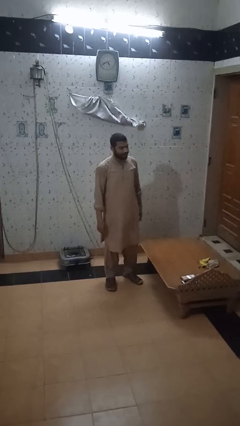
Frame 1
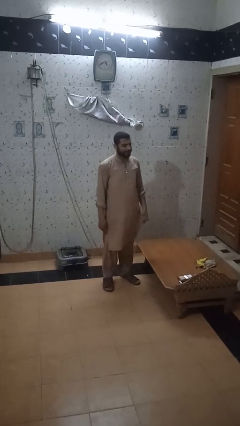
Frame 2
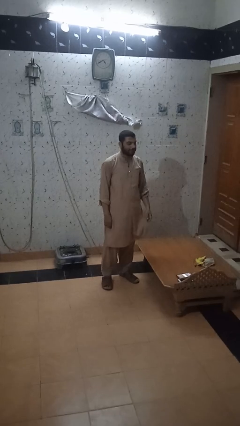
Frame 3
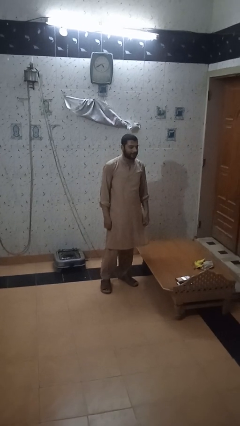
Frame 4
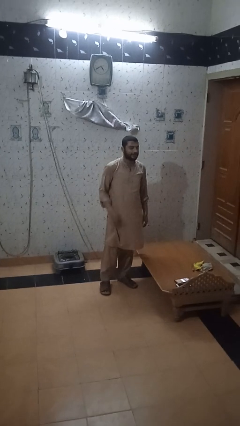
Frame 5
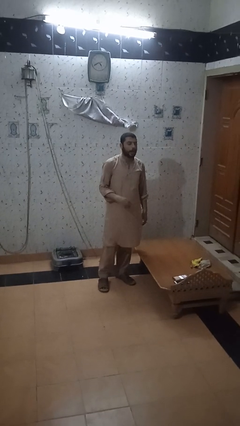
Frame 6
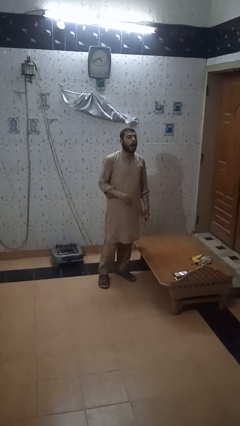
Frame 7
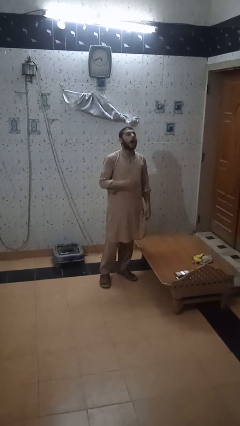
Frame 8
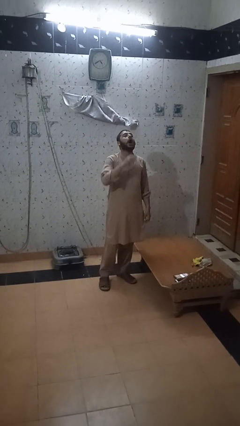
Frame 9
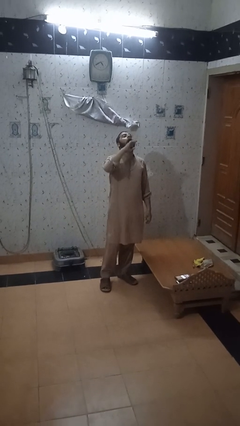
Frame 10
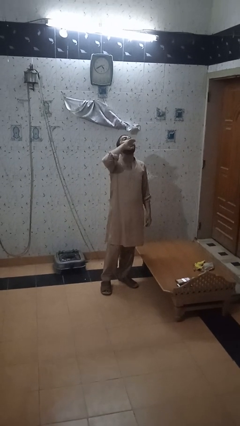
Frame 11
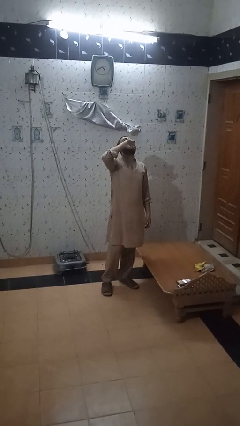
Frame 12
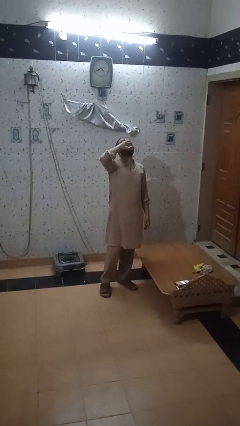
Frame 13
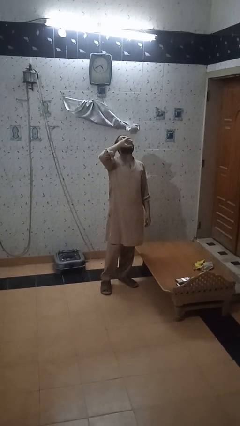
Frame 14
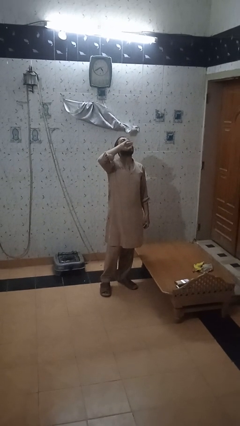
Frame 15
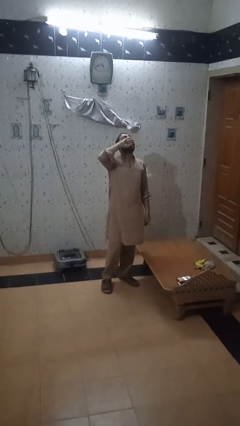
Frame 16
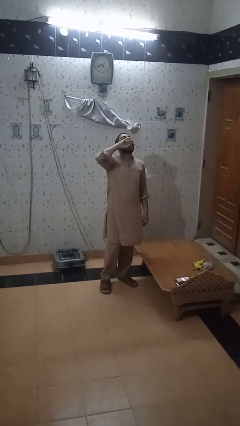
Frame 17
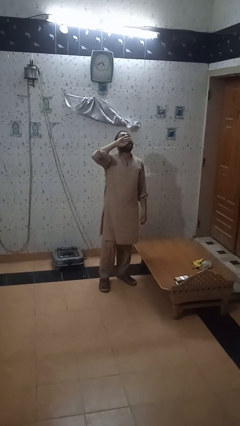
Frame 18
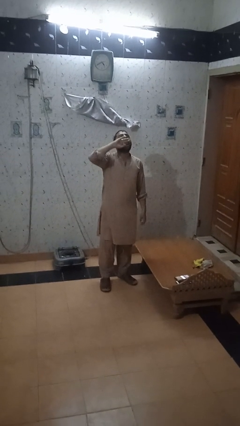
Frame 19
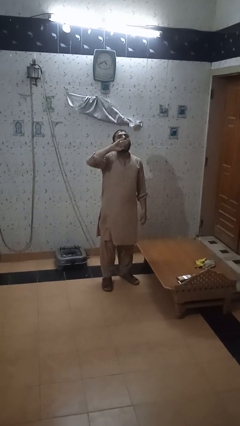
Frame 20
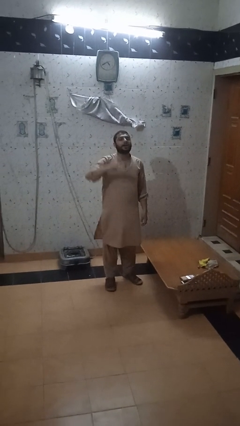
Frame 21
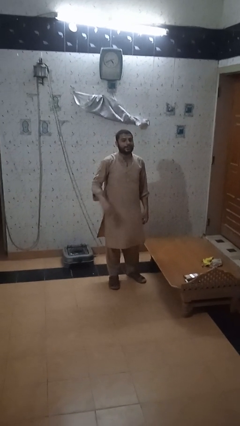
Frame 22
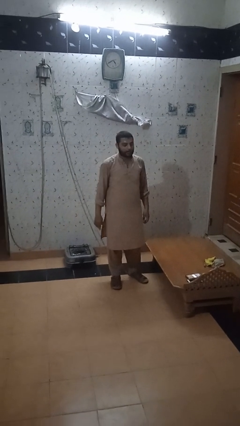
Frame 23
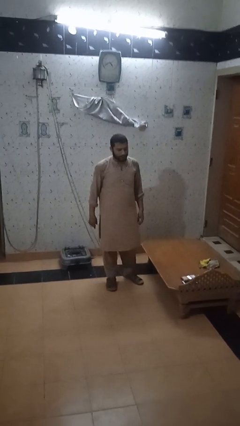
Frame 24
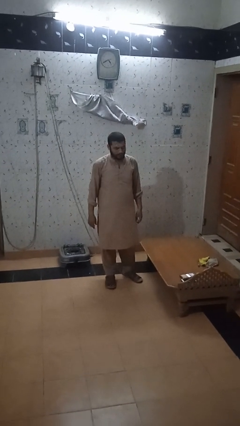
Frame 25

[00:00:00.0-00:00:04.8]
person yawns

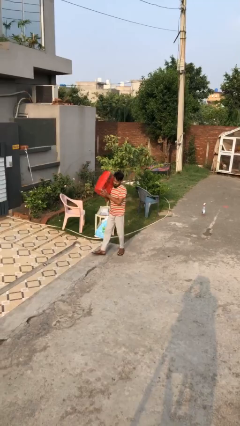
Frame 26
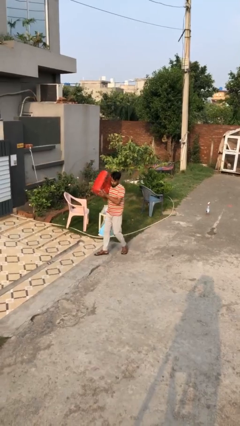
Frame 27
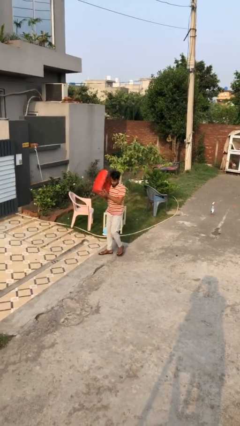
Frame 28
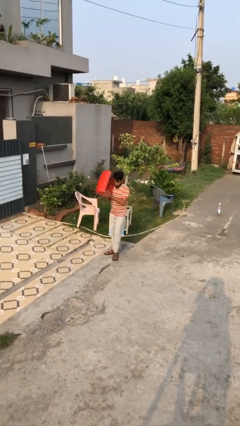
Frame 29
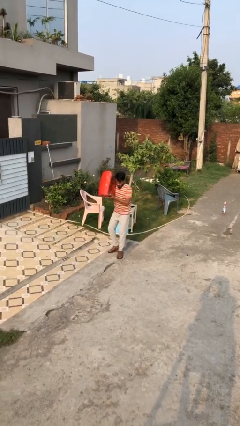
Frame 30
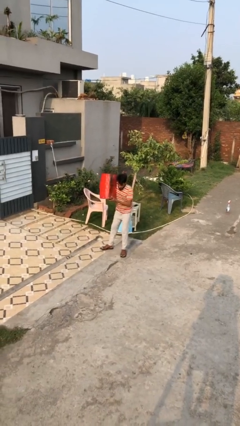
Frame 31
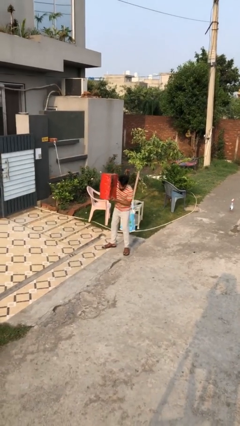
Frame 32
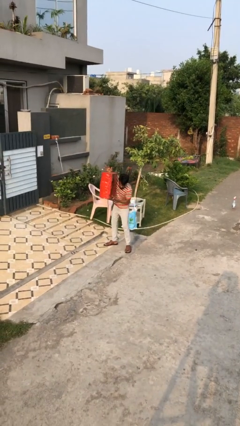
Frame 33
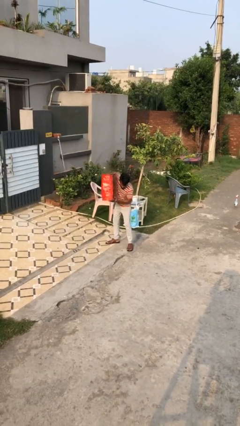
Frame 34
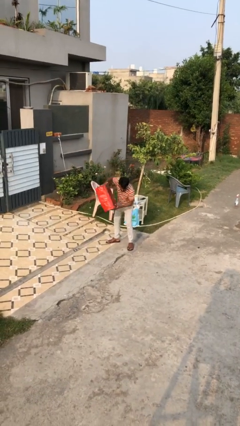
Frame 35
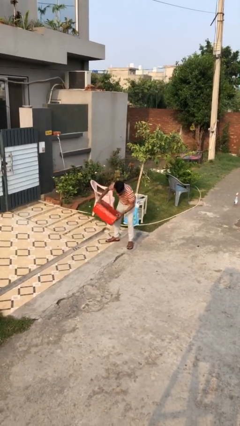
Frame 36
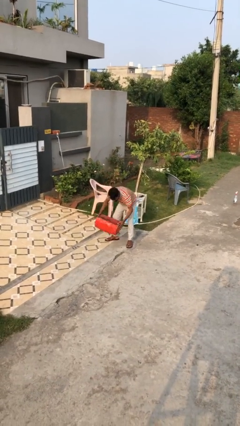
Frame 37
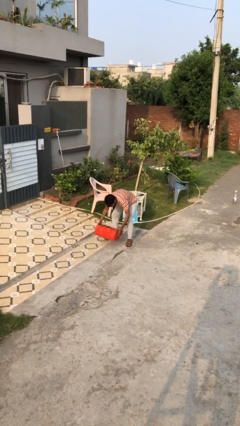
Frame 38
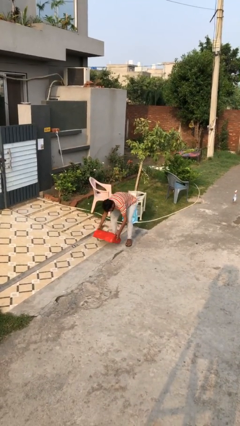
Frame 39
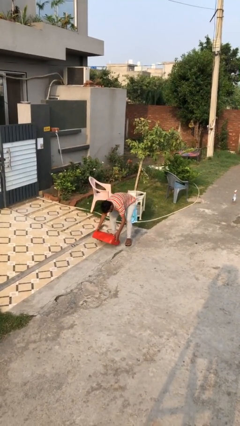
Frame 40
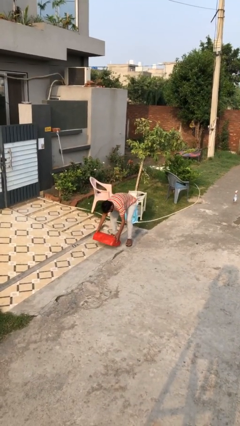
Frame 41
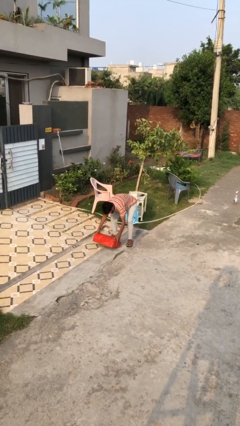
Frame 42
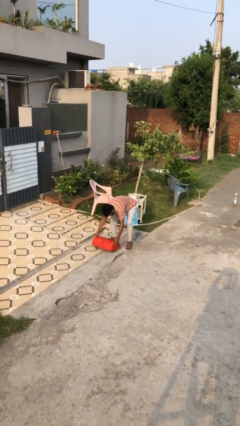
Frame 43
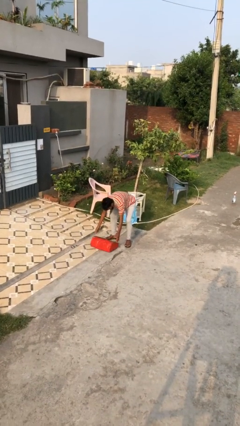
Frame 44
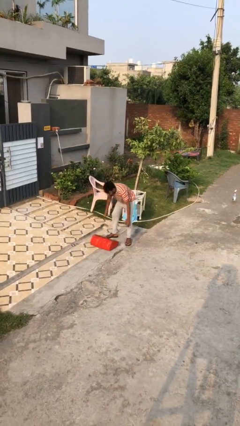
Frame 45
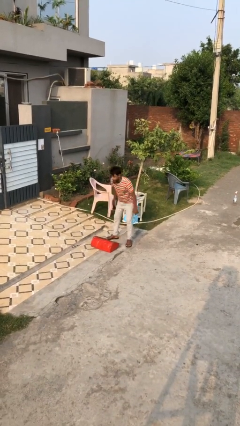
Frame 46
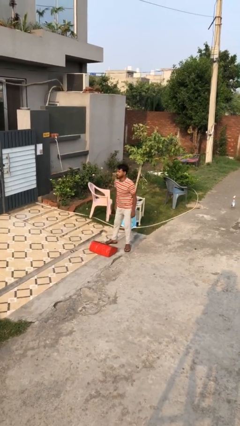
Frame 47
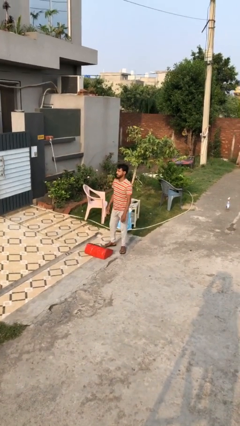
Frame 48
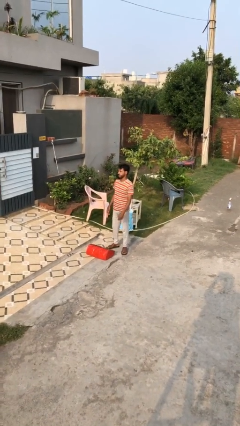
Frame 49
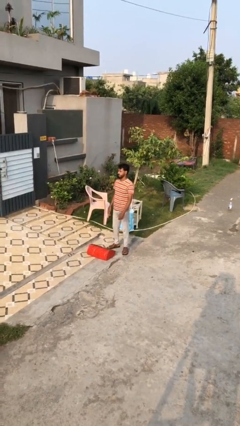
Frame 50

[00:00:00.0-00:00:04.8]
person puts down object on floor

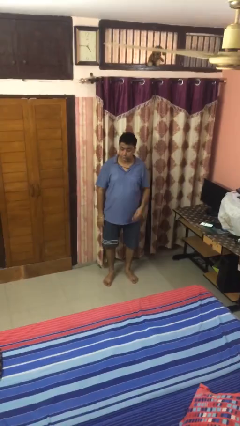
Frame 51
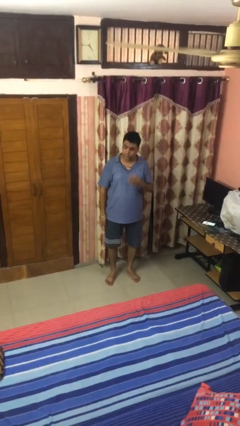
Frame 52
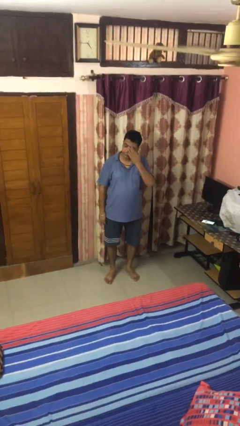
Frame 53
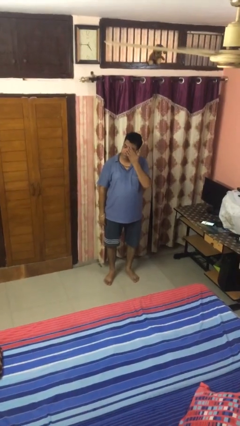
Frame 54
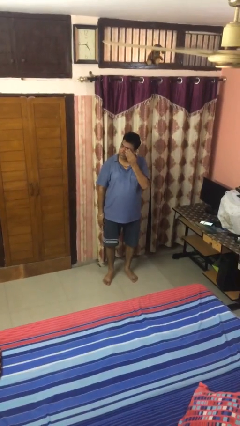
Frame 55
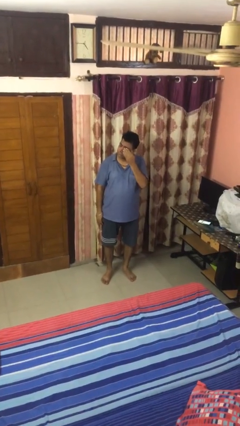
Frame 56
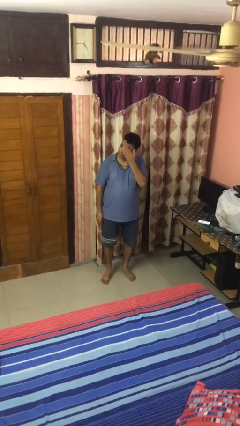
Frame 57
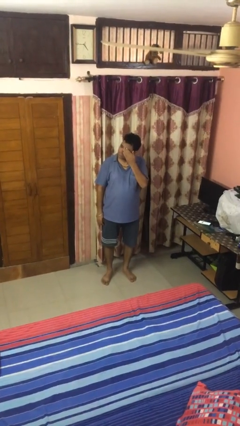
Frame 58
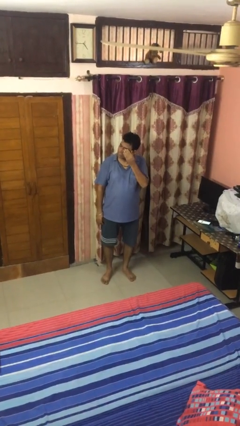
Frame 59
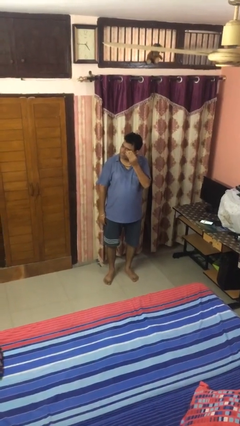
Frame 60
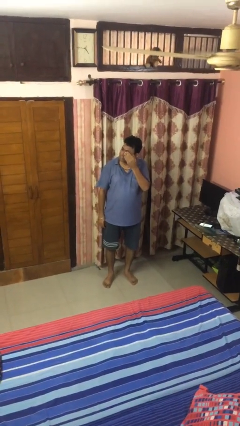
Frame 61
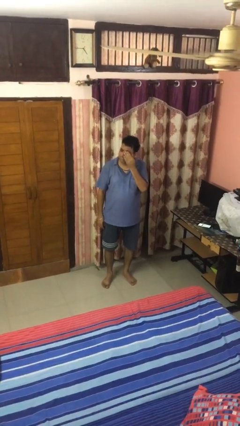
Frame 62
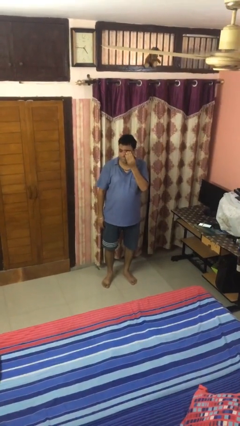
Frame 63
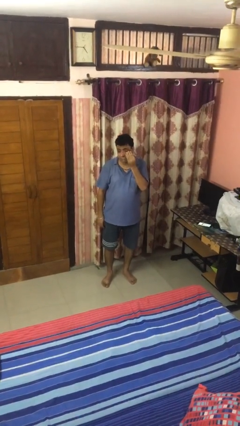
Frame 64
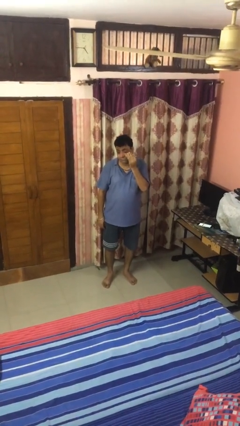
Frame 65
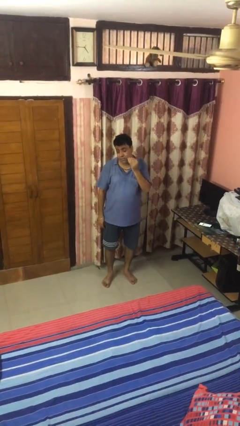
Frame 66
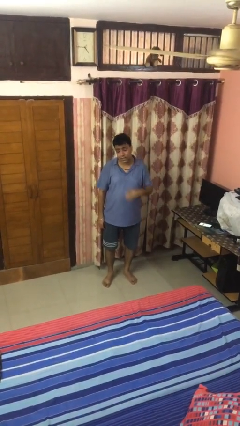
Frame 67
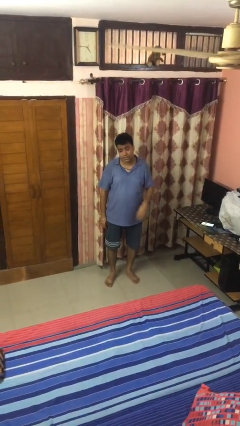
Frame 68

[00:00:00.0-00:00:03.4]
person rubs eyes

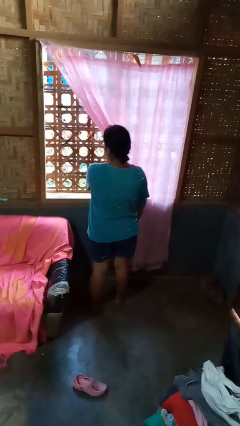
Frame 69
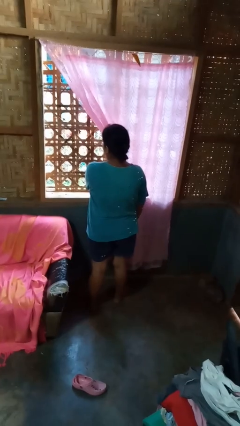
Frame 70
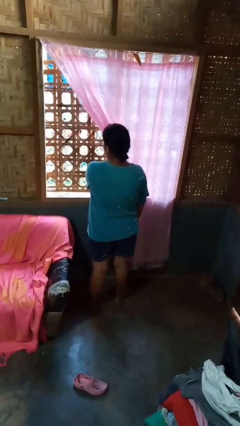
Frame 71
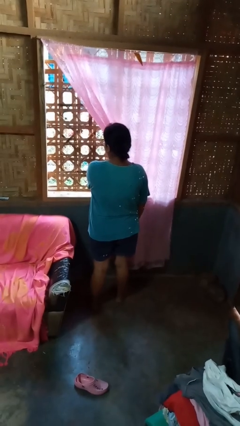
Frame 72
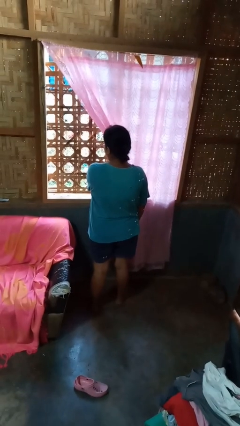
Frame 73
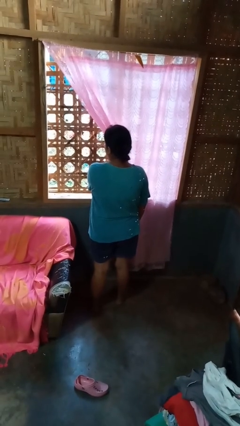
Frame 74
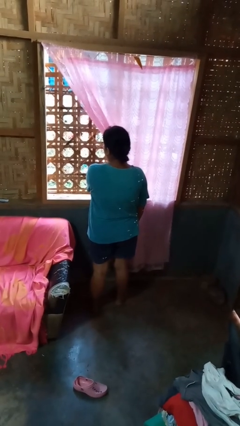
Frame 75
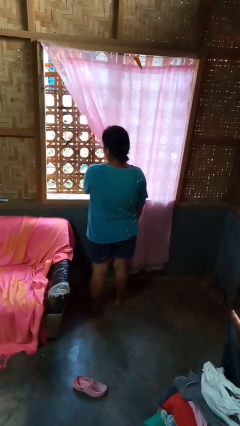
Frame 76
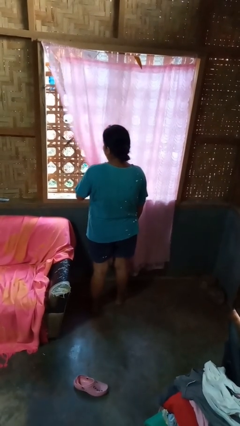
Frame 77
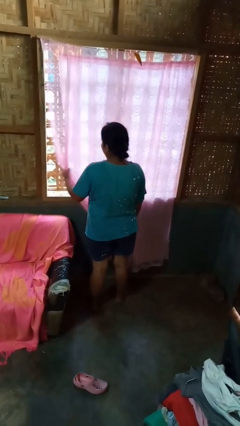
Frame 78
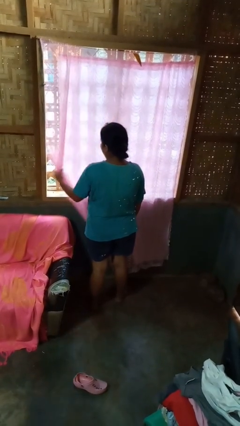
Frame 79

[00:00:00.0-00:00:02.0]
person closes curtains

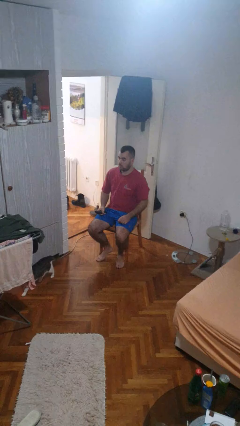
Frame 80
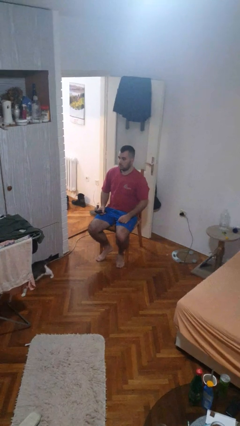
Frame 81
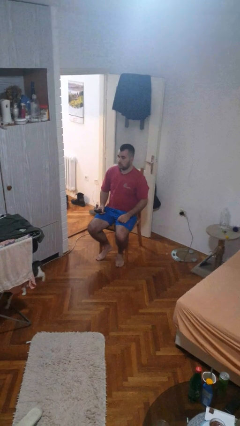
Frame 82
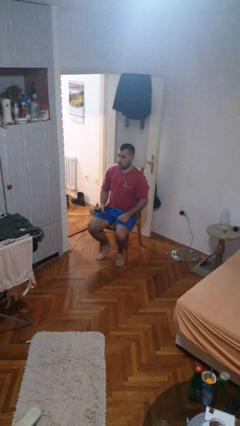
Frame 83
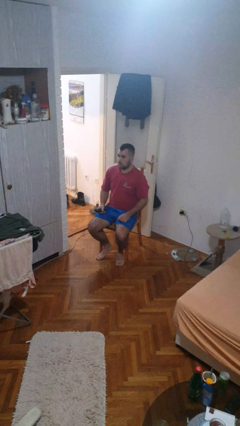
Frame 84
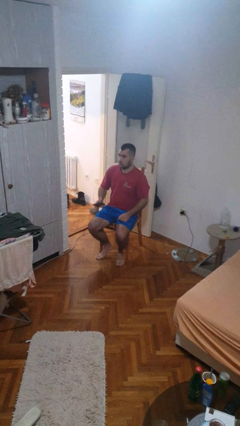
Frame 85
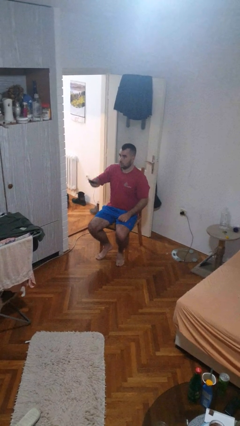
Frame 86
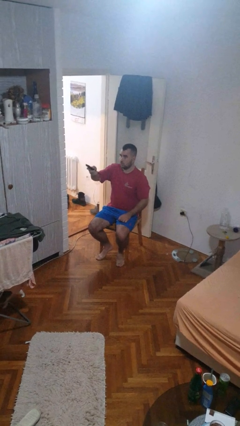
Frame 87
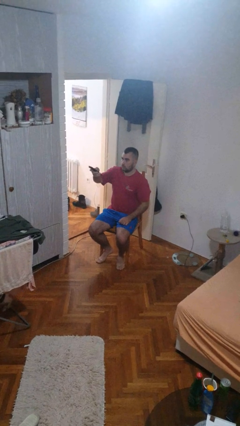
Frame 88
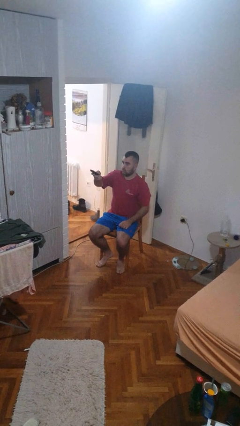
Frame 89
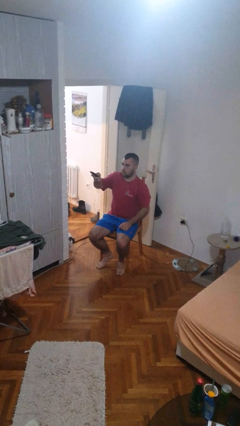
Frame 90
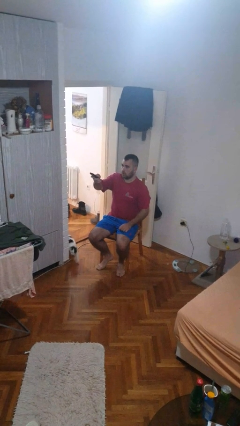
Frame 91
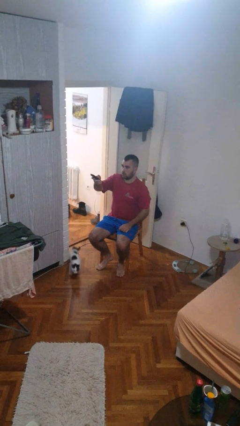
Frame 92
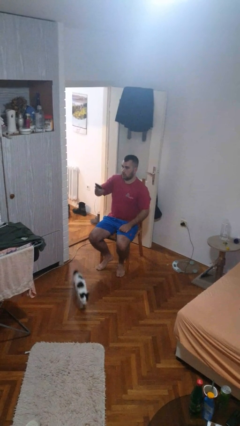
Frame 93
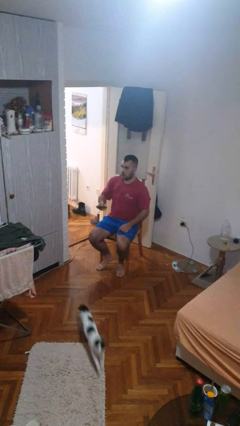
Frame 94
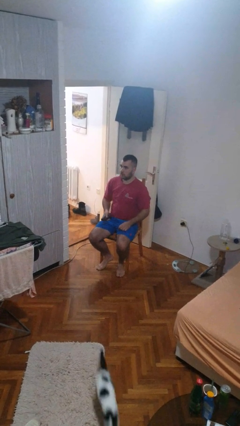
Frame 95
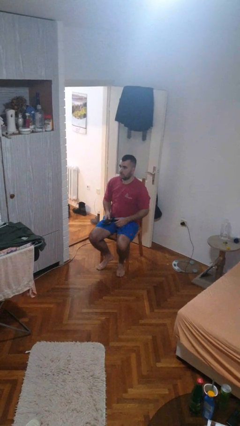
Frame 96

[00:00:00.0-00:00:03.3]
person uses television remote
